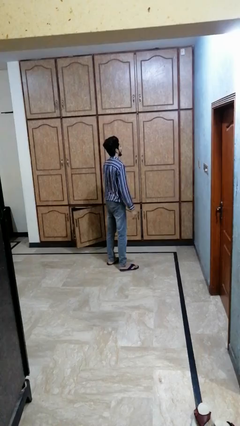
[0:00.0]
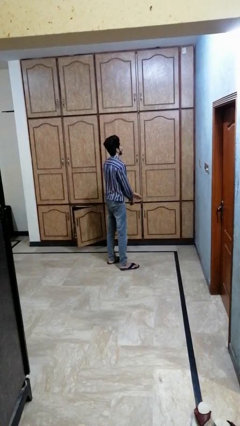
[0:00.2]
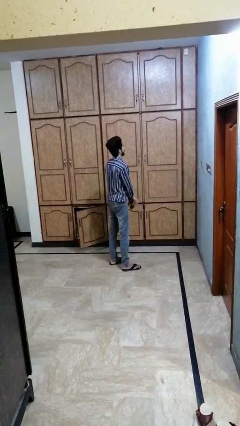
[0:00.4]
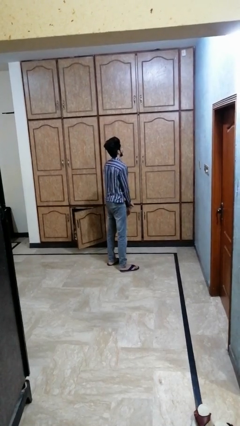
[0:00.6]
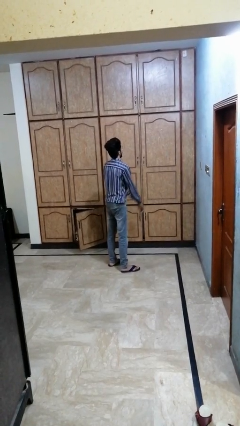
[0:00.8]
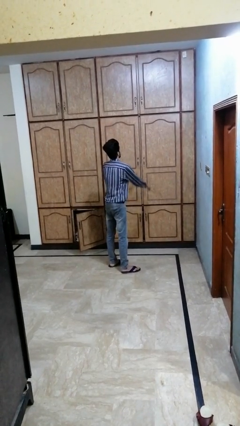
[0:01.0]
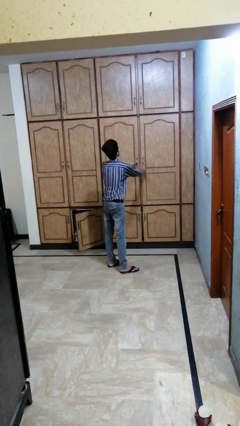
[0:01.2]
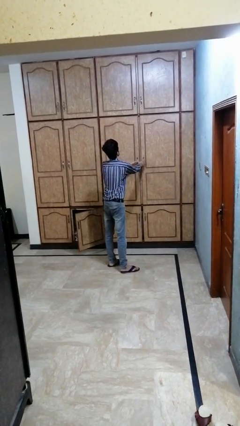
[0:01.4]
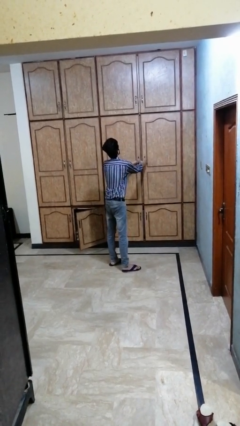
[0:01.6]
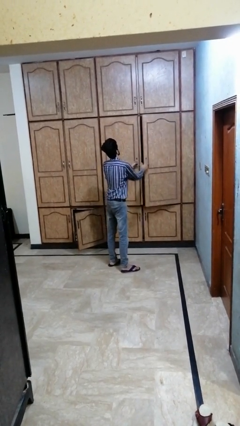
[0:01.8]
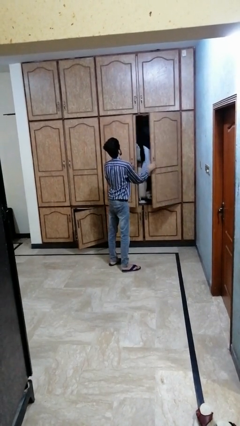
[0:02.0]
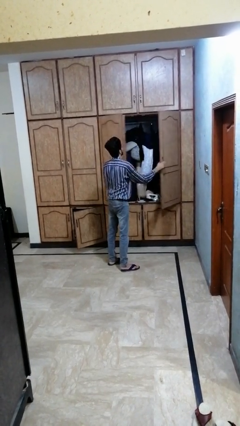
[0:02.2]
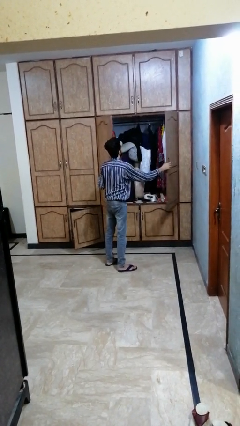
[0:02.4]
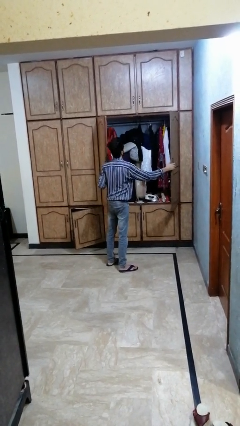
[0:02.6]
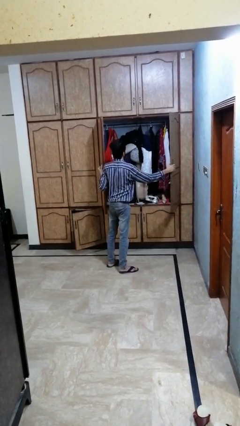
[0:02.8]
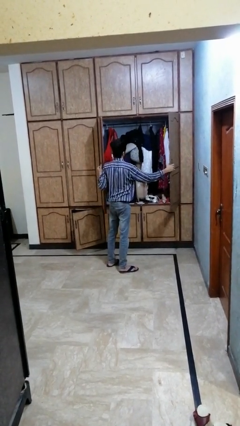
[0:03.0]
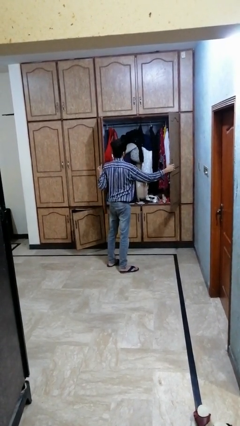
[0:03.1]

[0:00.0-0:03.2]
person opens dresser drawer

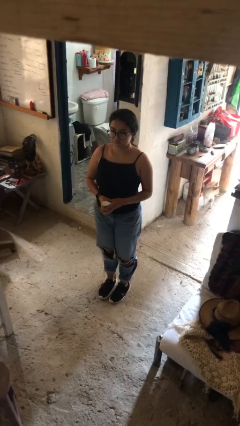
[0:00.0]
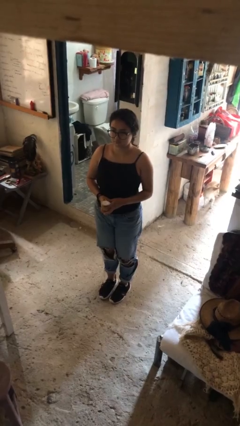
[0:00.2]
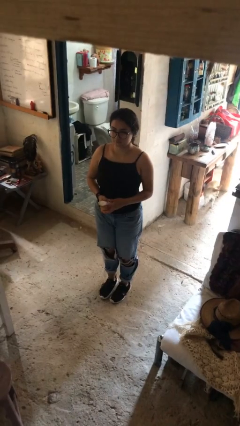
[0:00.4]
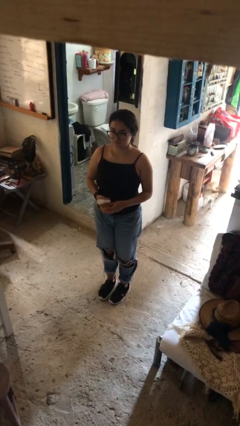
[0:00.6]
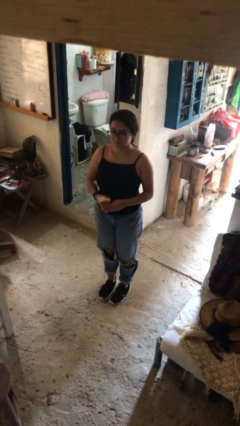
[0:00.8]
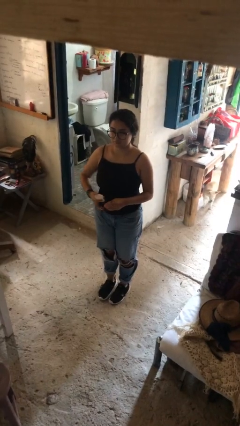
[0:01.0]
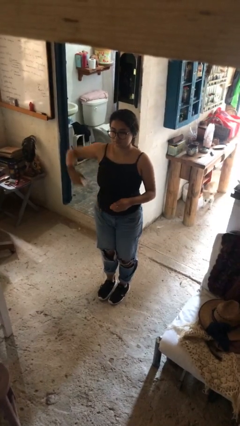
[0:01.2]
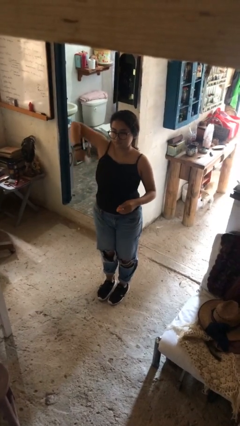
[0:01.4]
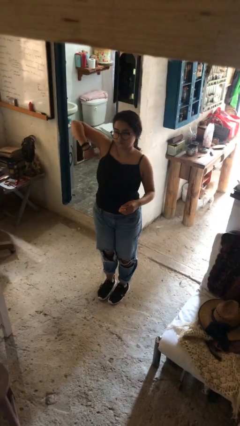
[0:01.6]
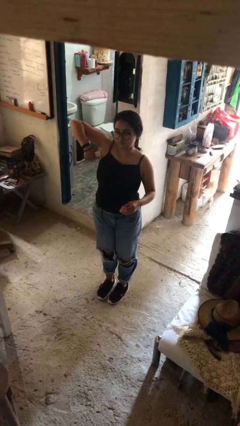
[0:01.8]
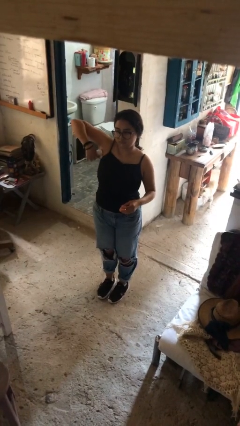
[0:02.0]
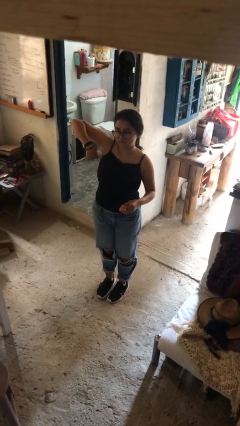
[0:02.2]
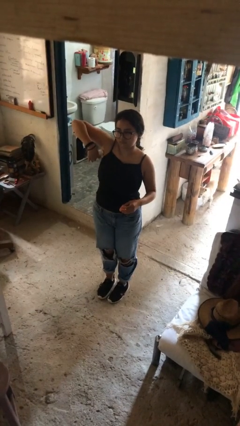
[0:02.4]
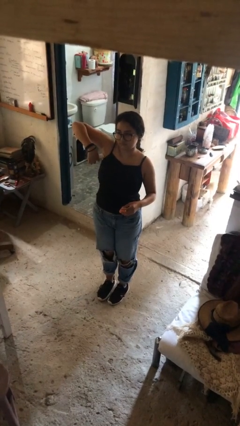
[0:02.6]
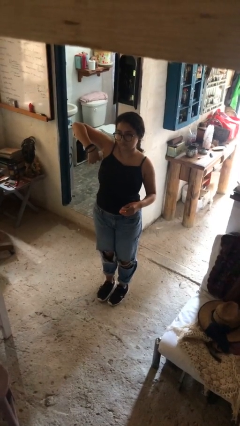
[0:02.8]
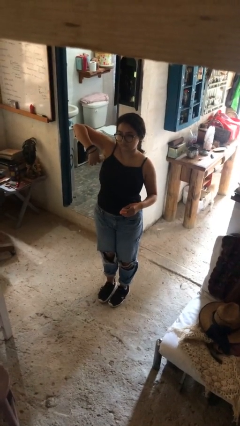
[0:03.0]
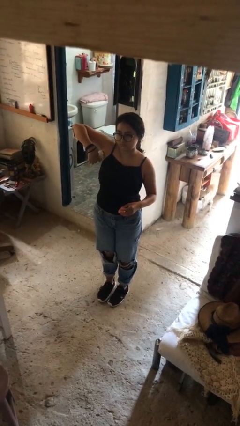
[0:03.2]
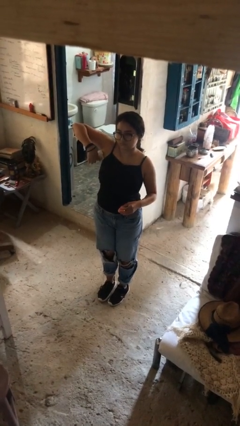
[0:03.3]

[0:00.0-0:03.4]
person applies deodorant

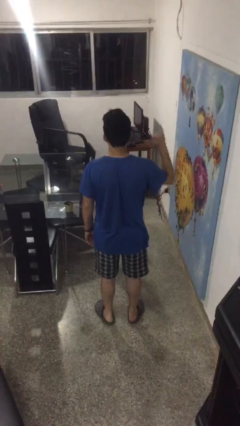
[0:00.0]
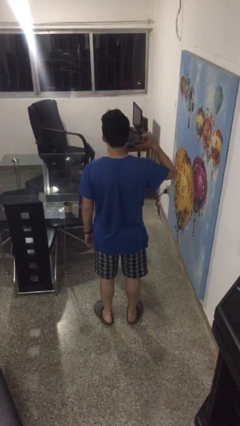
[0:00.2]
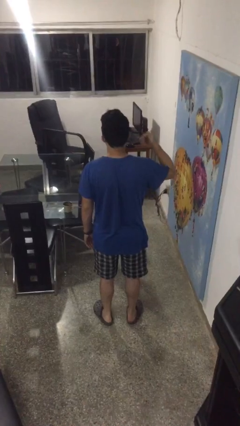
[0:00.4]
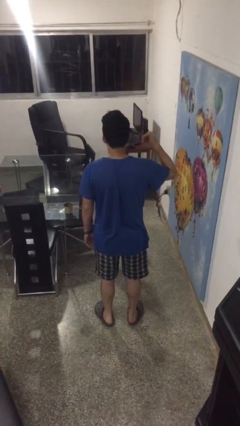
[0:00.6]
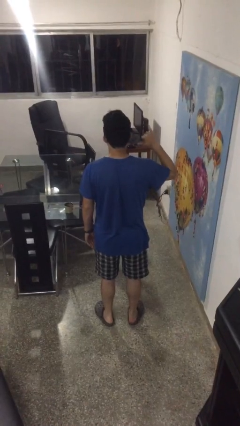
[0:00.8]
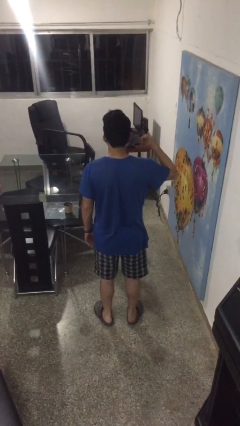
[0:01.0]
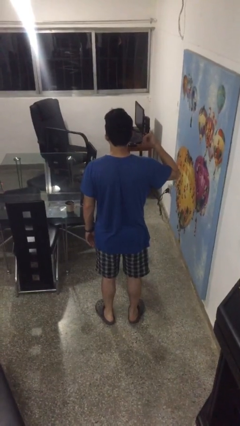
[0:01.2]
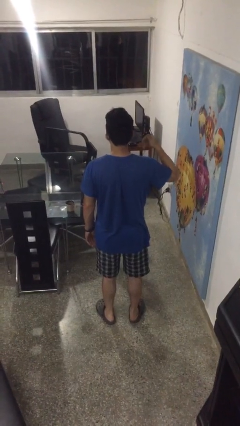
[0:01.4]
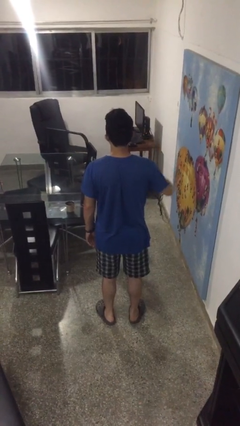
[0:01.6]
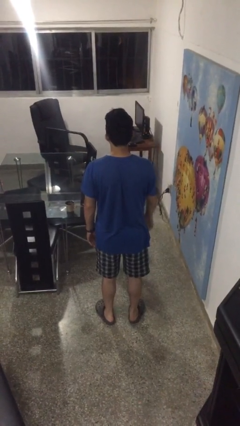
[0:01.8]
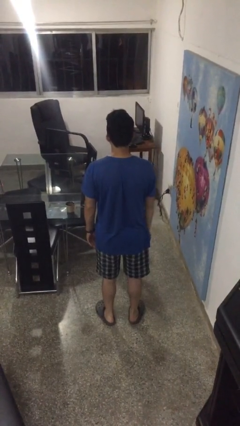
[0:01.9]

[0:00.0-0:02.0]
person gestures hang loose

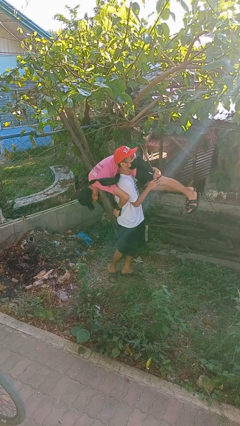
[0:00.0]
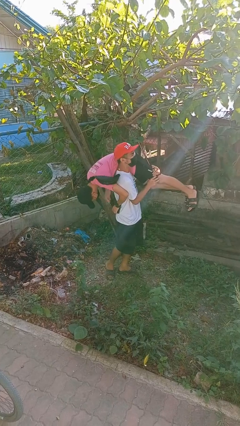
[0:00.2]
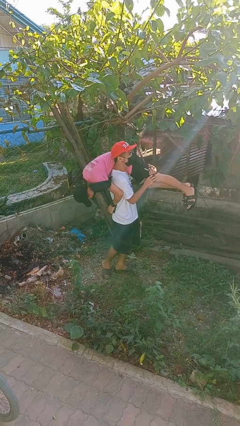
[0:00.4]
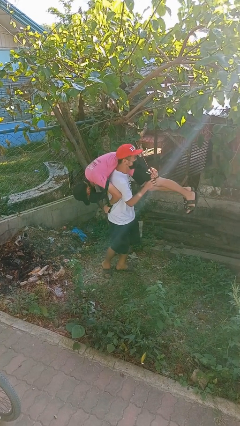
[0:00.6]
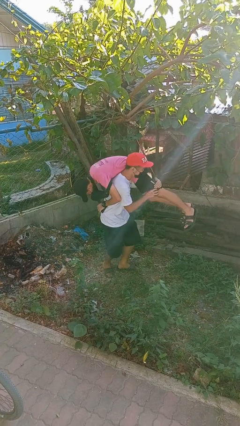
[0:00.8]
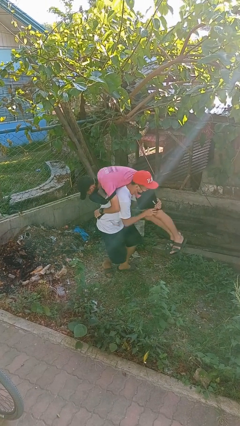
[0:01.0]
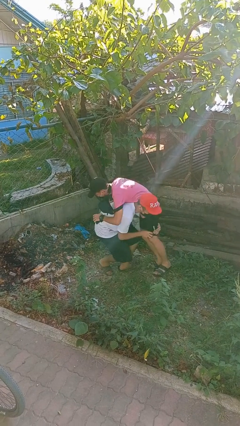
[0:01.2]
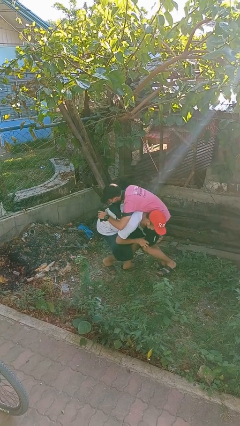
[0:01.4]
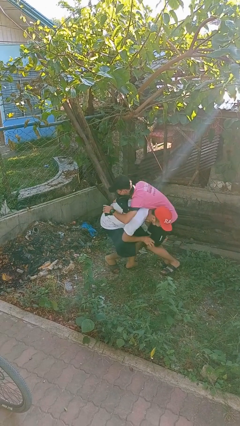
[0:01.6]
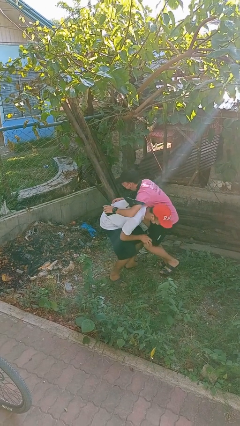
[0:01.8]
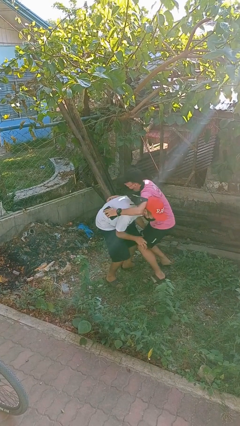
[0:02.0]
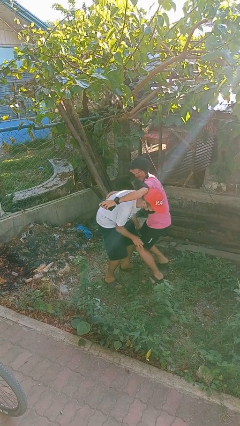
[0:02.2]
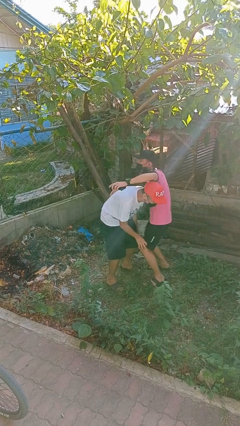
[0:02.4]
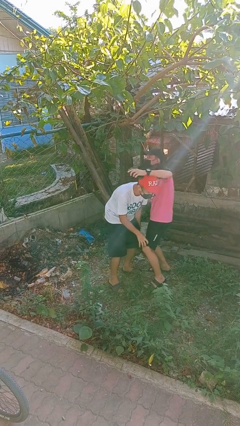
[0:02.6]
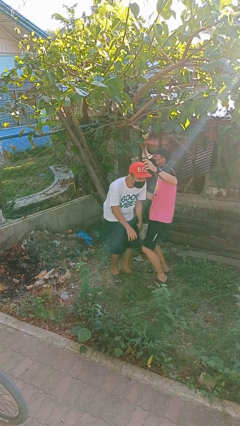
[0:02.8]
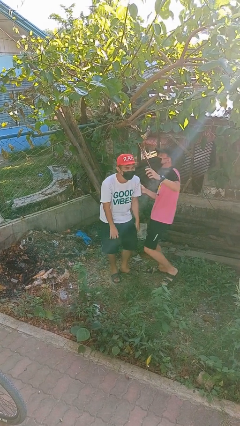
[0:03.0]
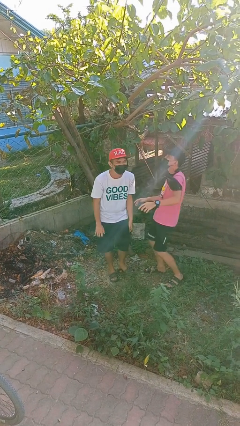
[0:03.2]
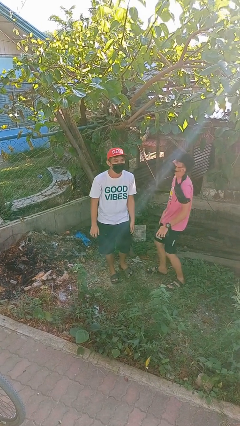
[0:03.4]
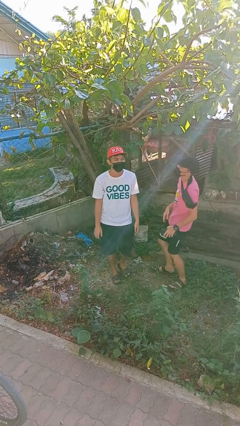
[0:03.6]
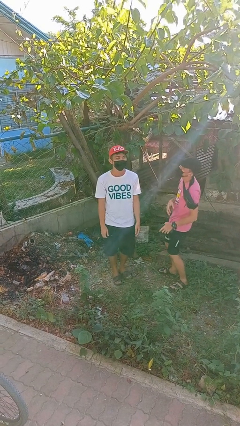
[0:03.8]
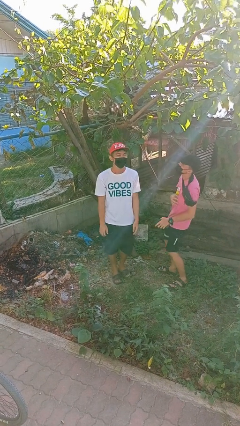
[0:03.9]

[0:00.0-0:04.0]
person puts down person

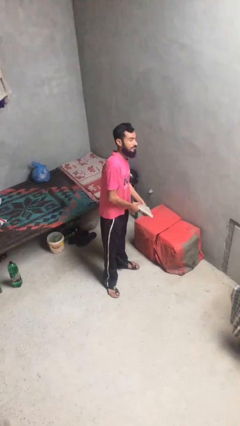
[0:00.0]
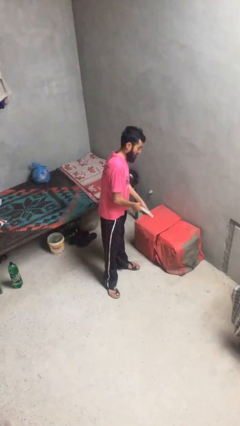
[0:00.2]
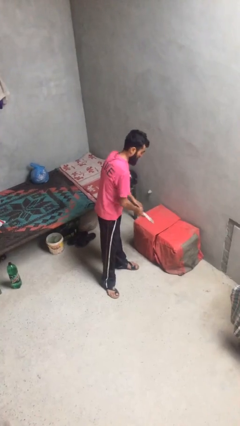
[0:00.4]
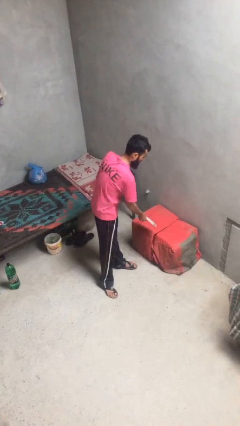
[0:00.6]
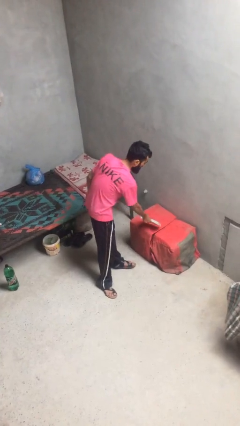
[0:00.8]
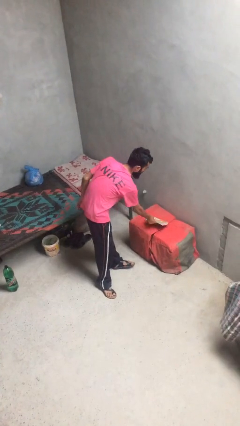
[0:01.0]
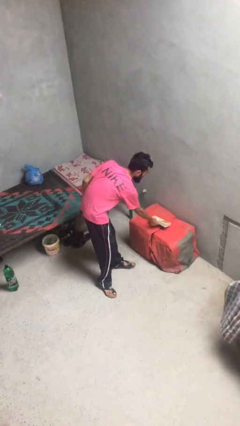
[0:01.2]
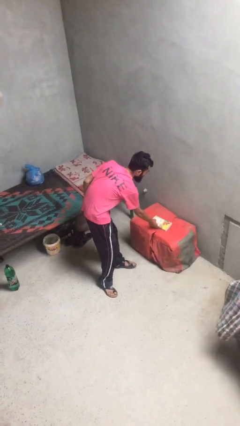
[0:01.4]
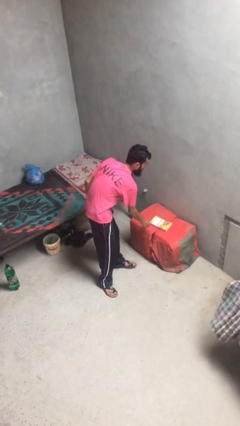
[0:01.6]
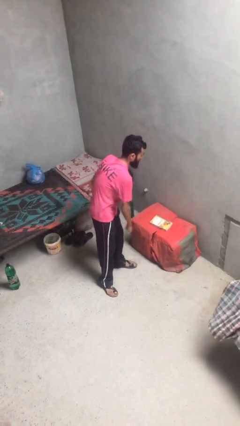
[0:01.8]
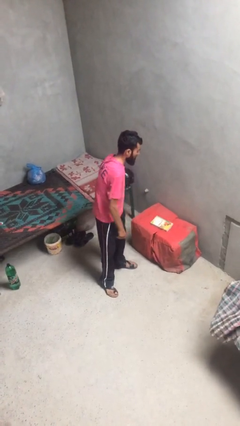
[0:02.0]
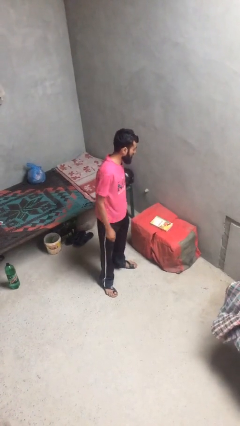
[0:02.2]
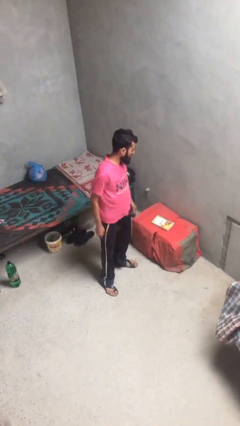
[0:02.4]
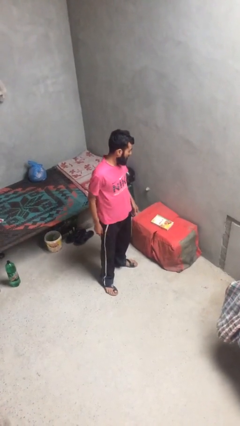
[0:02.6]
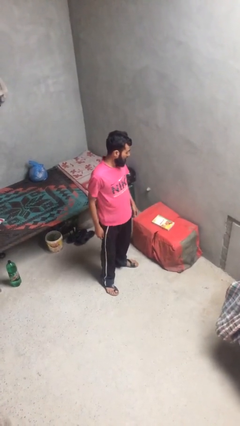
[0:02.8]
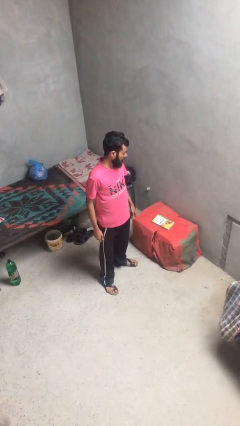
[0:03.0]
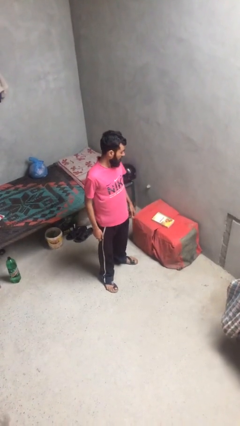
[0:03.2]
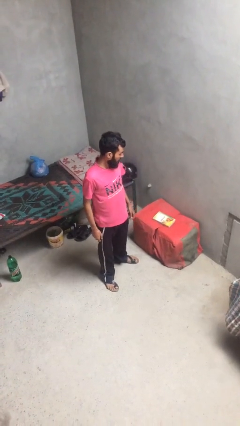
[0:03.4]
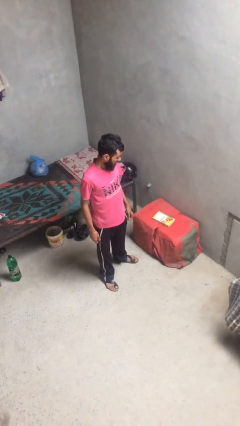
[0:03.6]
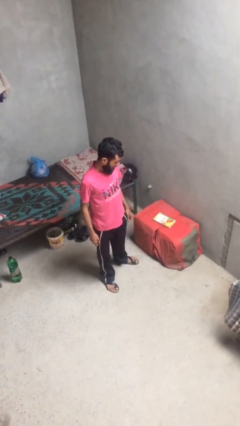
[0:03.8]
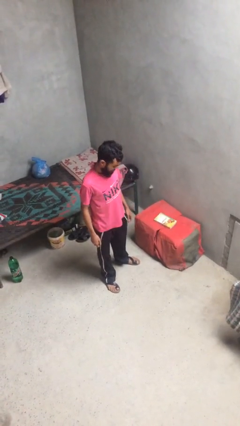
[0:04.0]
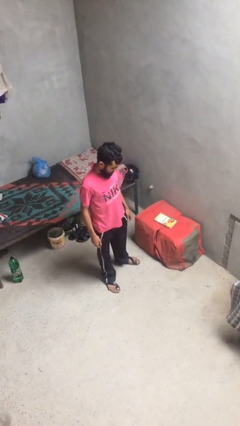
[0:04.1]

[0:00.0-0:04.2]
person puts down object on table

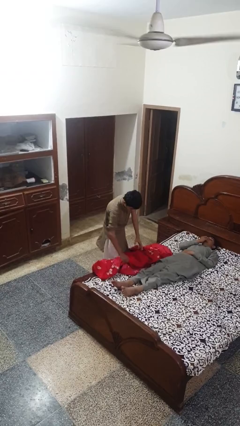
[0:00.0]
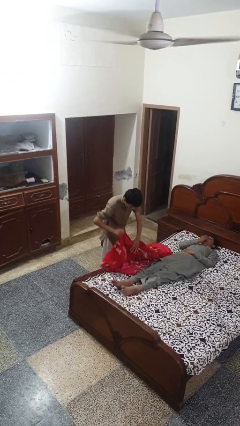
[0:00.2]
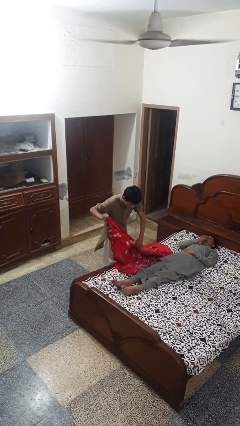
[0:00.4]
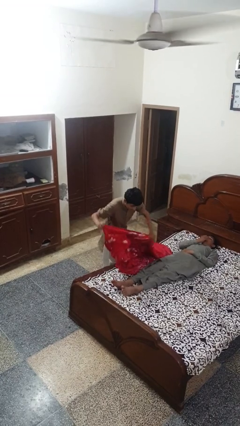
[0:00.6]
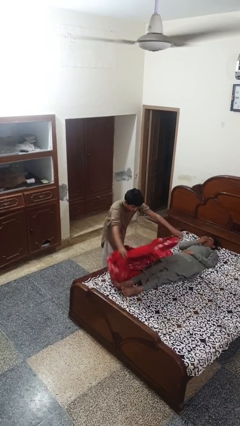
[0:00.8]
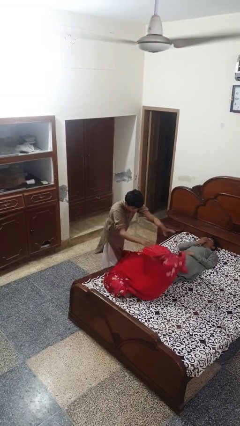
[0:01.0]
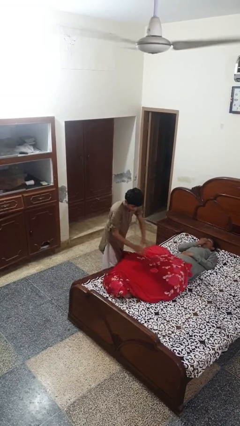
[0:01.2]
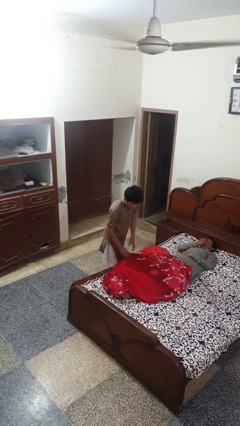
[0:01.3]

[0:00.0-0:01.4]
person covers friend with blanket
